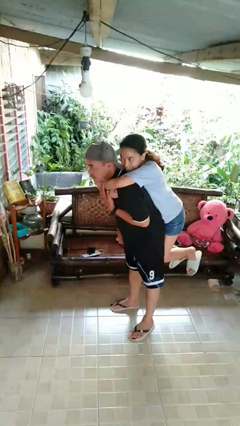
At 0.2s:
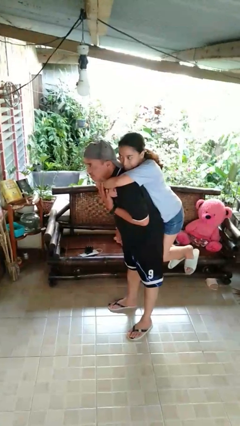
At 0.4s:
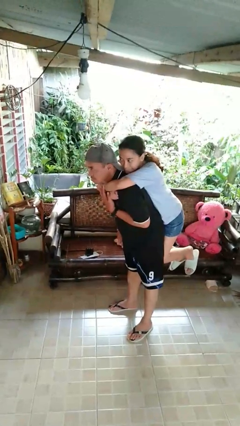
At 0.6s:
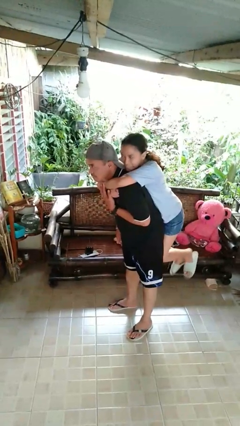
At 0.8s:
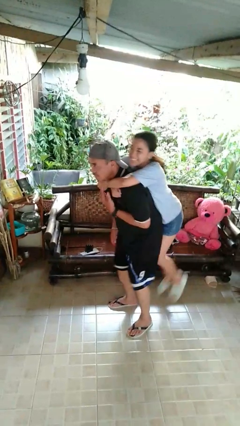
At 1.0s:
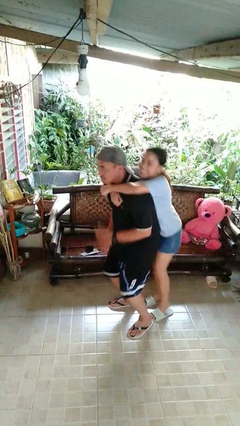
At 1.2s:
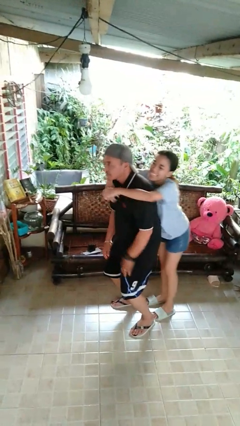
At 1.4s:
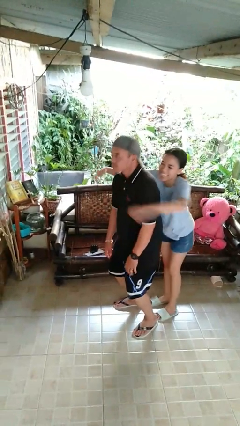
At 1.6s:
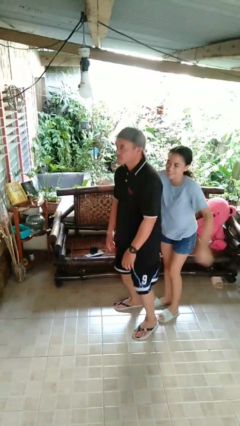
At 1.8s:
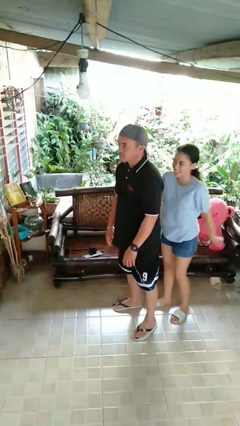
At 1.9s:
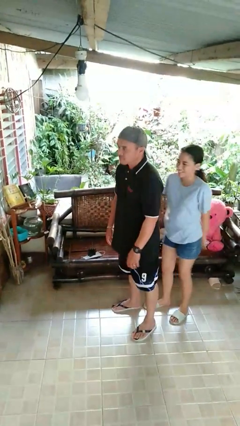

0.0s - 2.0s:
person puts down person

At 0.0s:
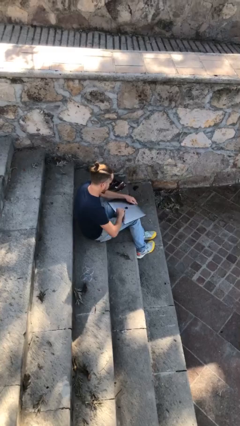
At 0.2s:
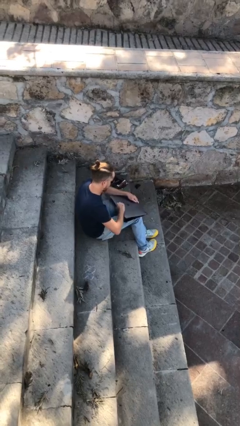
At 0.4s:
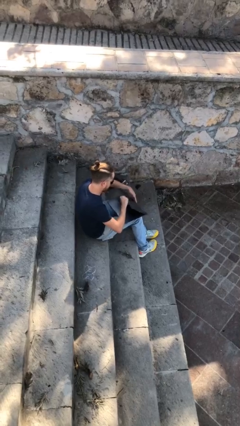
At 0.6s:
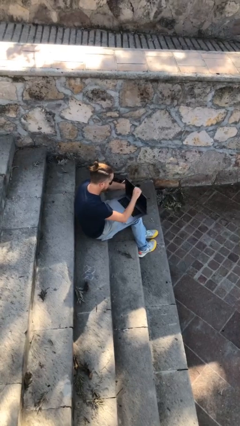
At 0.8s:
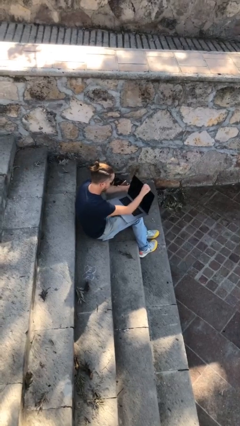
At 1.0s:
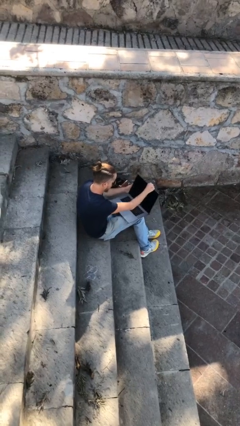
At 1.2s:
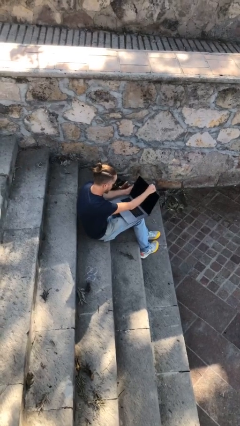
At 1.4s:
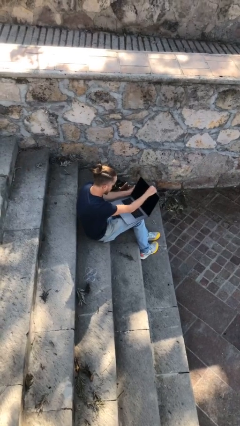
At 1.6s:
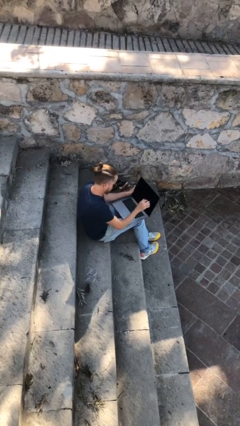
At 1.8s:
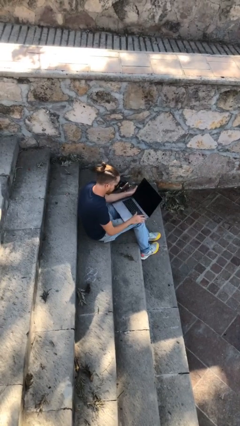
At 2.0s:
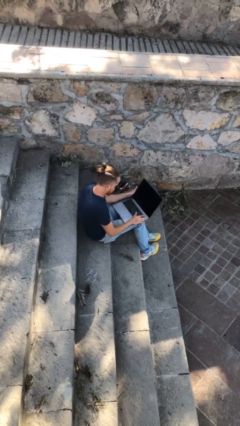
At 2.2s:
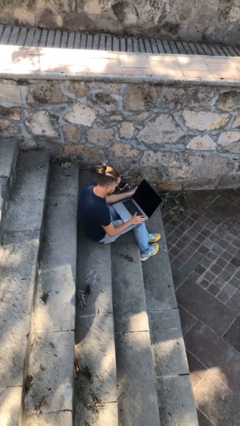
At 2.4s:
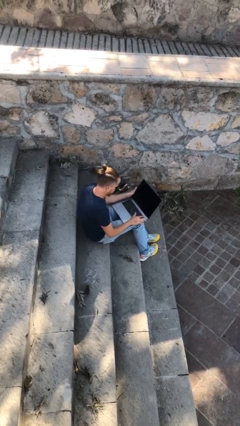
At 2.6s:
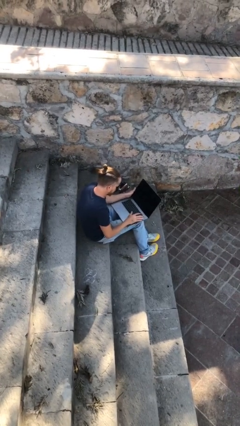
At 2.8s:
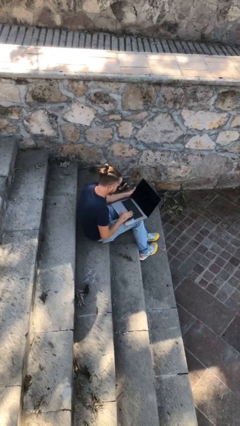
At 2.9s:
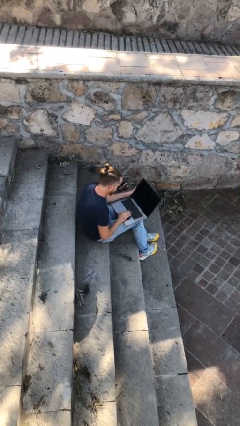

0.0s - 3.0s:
person interacts with laptop

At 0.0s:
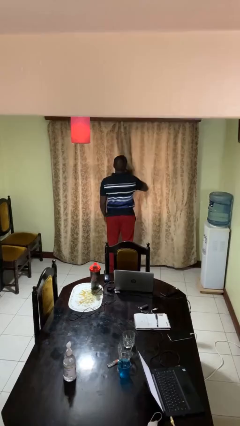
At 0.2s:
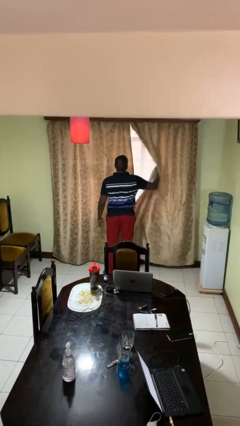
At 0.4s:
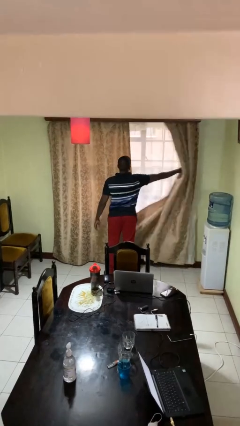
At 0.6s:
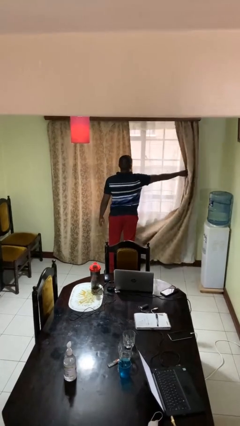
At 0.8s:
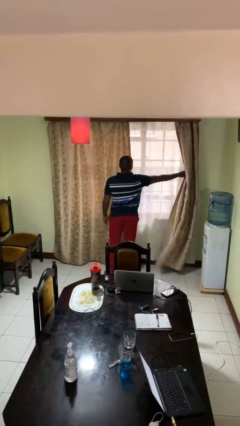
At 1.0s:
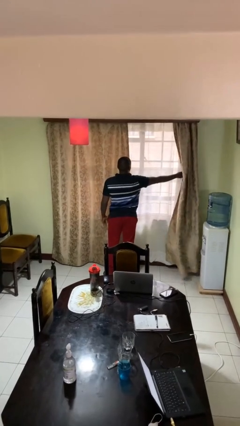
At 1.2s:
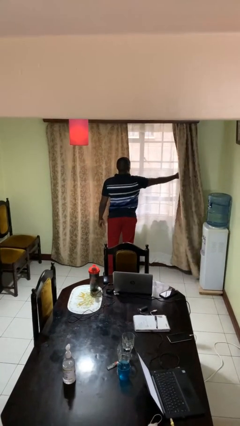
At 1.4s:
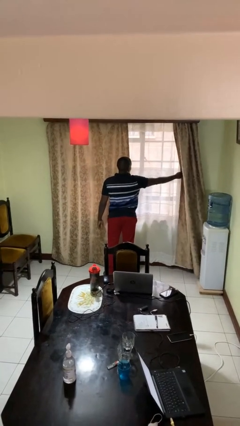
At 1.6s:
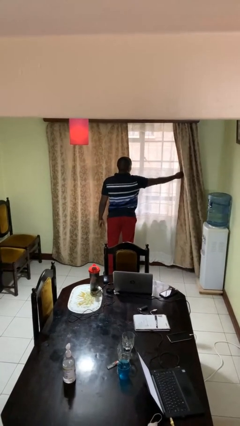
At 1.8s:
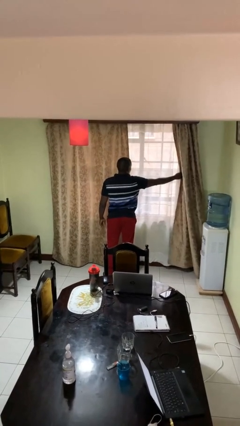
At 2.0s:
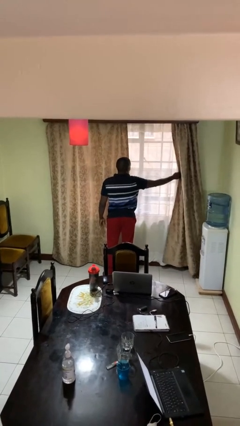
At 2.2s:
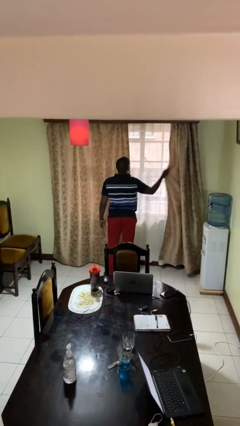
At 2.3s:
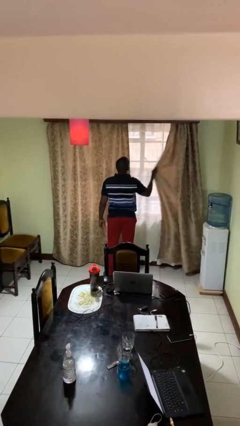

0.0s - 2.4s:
person opens curtains

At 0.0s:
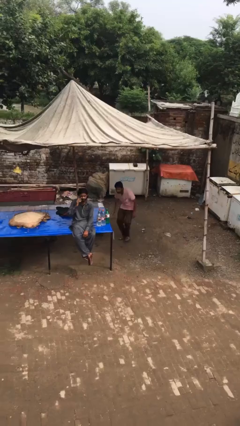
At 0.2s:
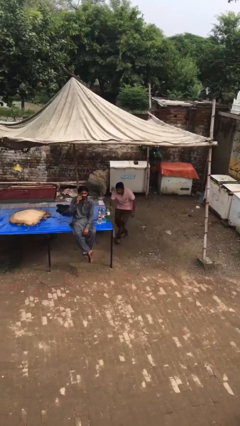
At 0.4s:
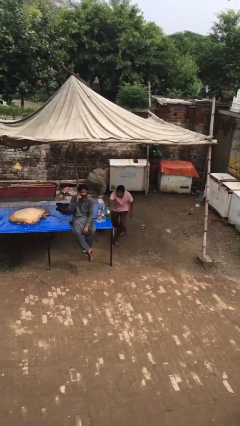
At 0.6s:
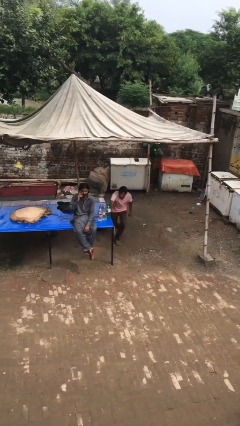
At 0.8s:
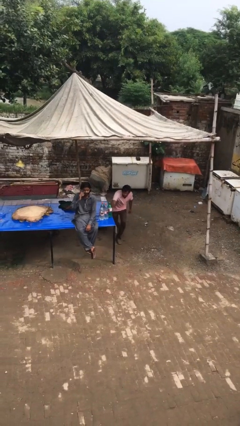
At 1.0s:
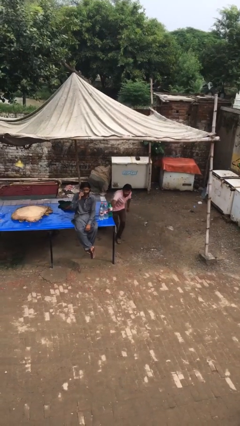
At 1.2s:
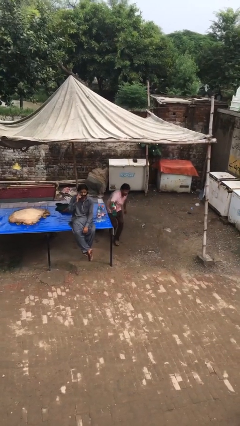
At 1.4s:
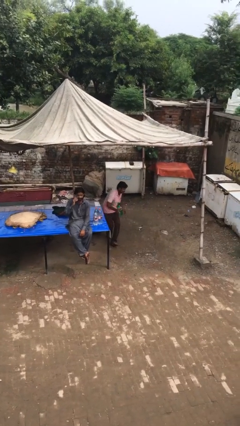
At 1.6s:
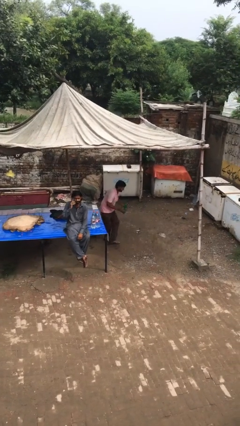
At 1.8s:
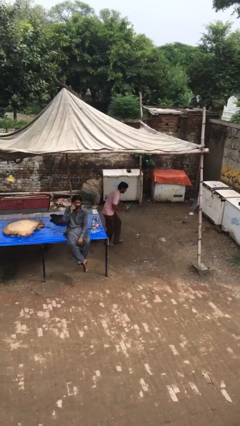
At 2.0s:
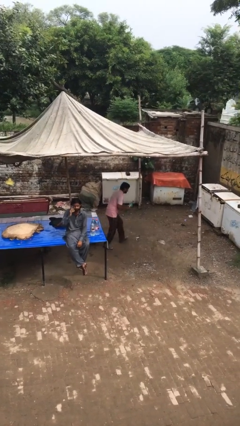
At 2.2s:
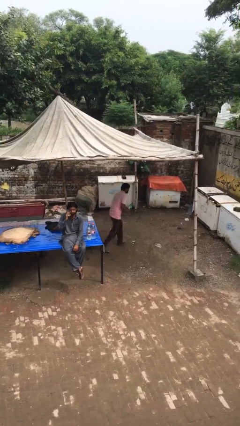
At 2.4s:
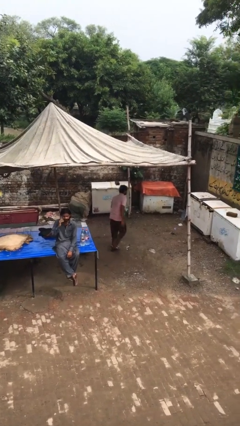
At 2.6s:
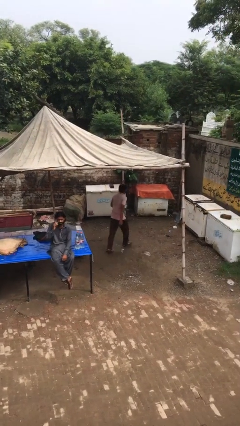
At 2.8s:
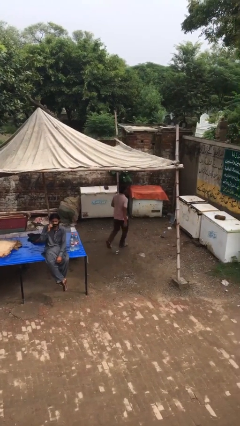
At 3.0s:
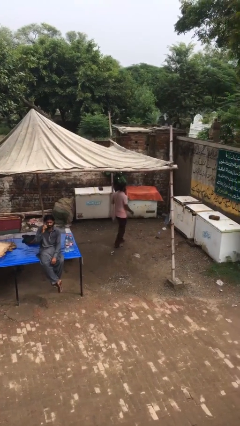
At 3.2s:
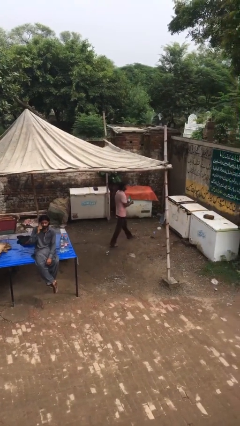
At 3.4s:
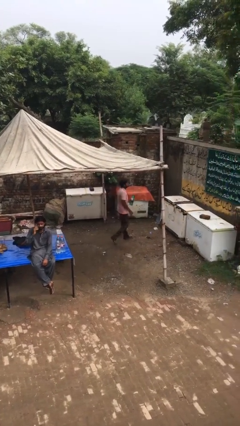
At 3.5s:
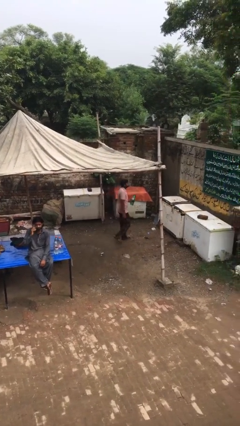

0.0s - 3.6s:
person steals object from person

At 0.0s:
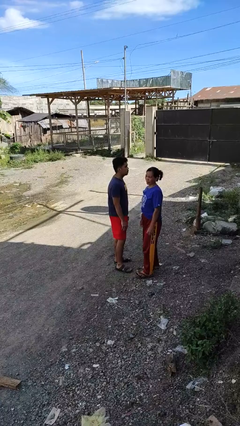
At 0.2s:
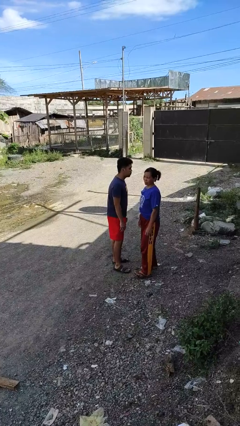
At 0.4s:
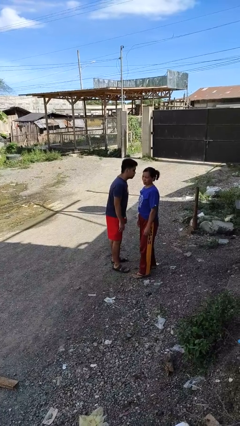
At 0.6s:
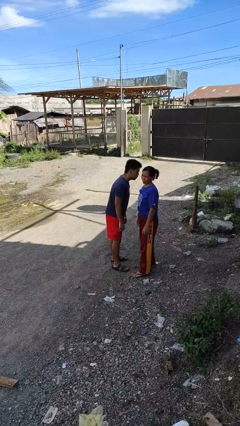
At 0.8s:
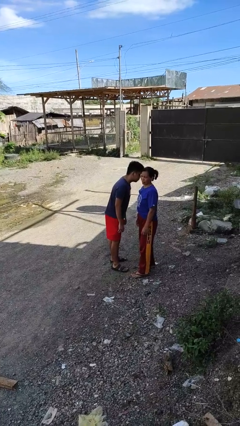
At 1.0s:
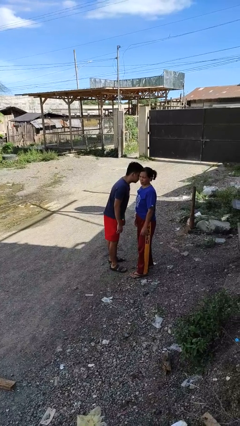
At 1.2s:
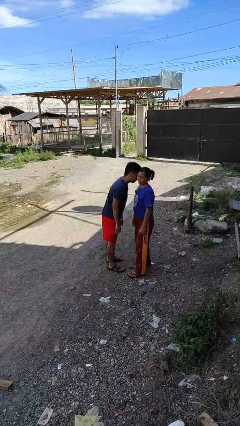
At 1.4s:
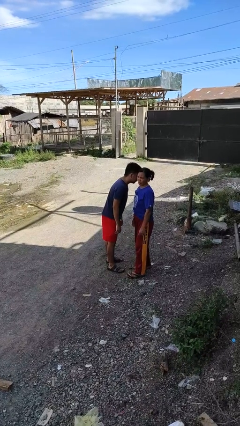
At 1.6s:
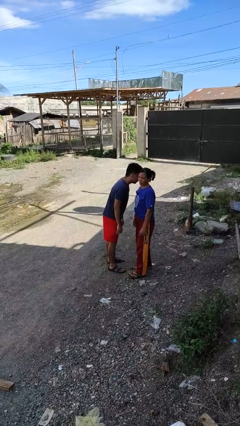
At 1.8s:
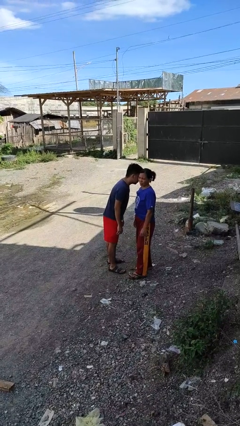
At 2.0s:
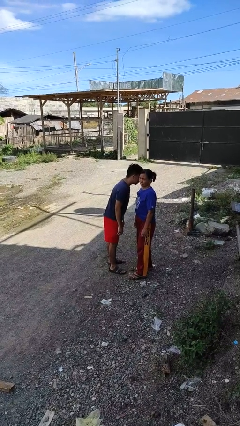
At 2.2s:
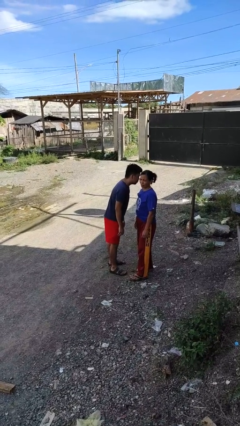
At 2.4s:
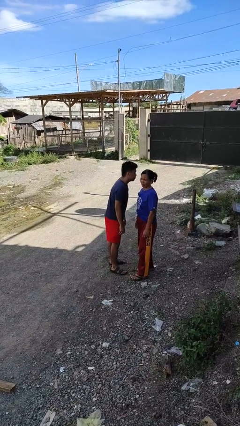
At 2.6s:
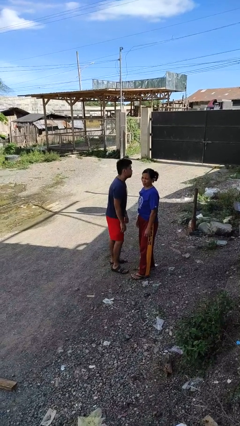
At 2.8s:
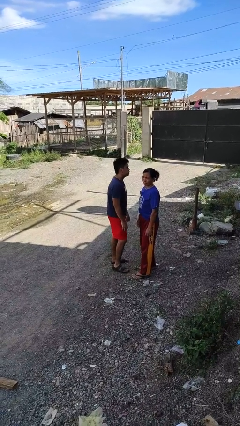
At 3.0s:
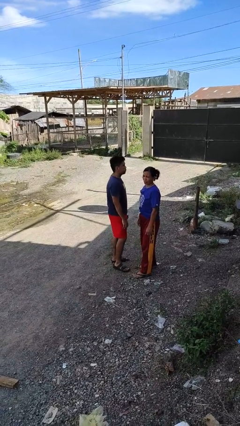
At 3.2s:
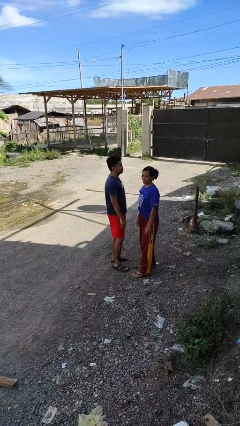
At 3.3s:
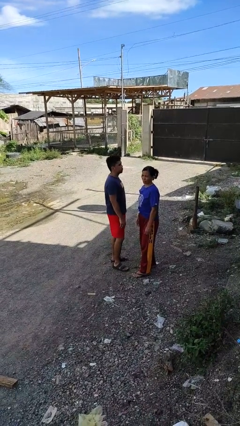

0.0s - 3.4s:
person kisses cheek of person

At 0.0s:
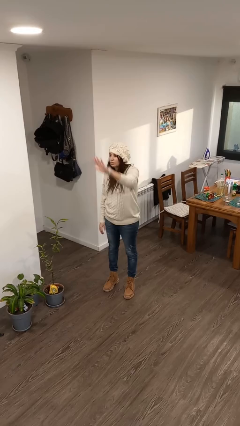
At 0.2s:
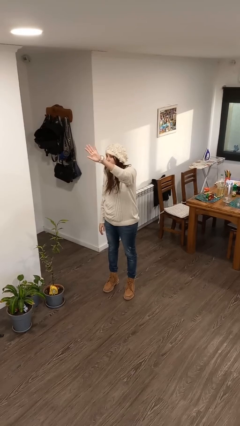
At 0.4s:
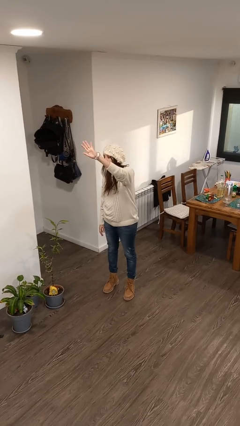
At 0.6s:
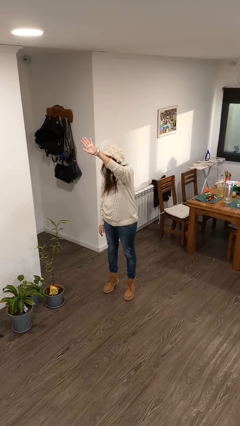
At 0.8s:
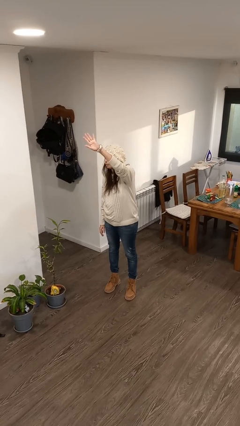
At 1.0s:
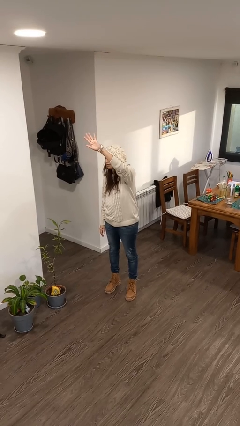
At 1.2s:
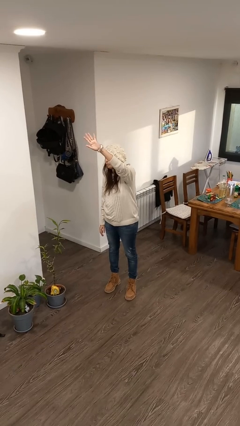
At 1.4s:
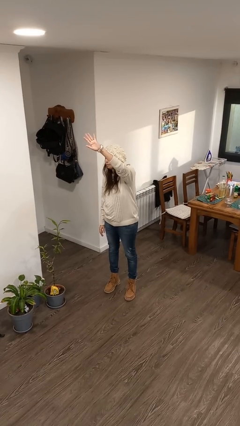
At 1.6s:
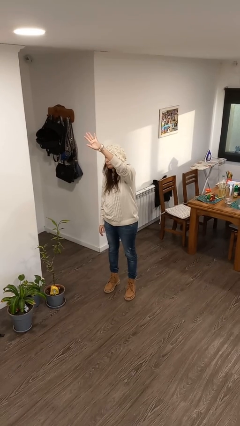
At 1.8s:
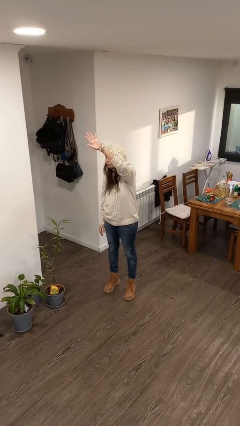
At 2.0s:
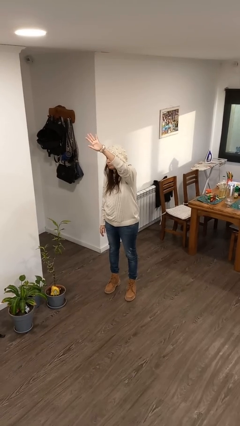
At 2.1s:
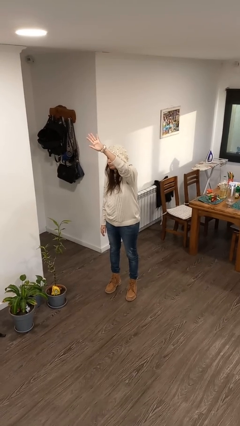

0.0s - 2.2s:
person gestures raise hand

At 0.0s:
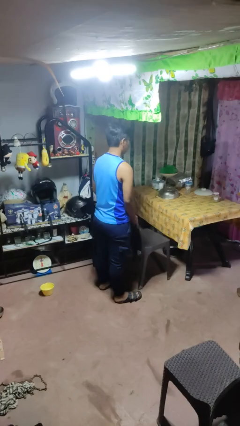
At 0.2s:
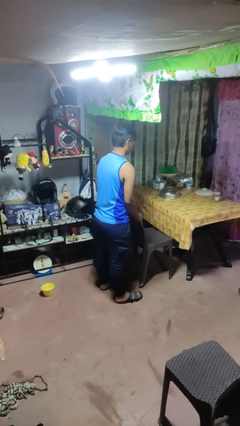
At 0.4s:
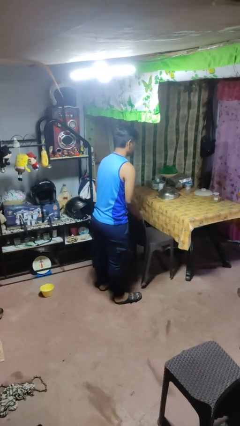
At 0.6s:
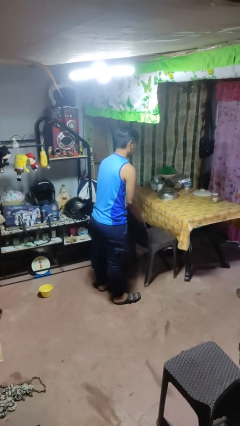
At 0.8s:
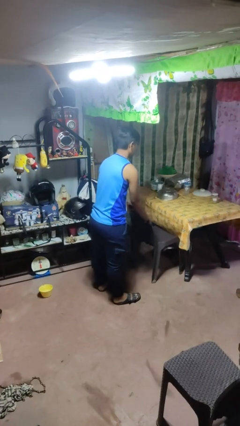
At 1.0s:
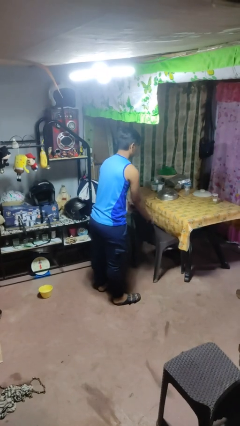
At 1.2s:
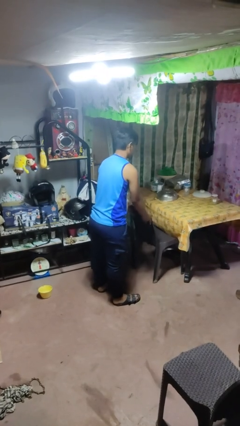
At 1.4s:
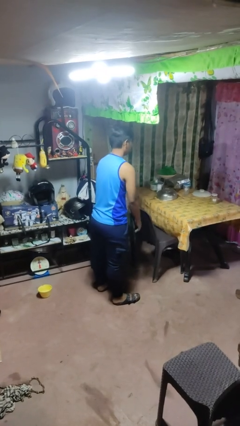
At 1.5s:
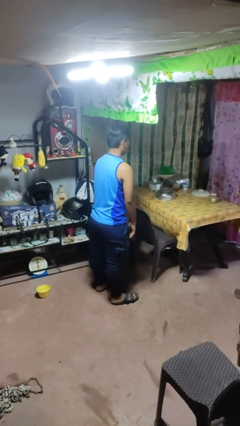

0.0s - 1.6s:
person pushes in chair
